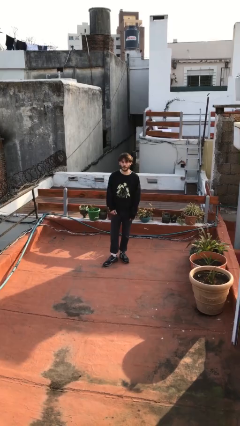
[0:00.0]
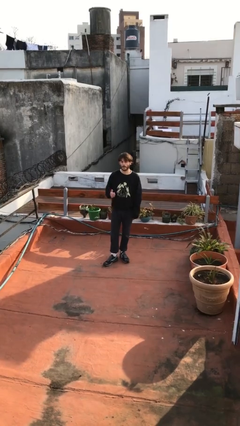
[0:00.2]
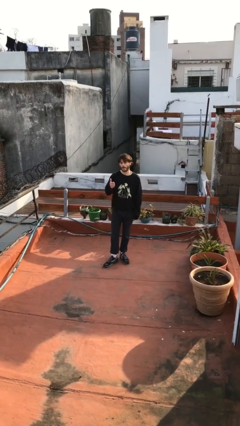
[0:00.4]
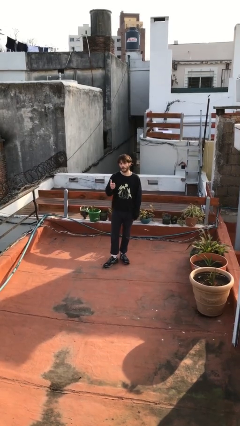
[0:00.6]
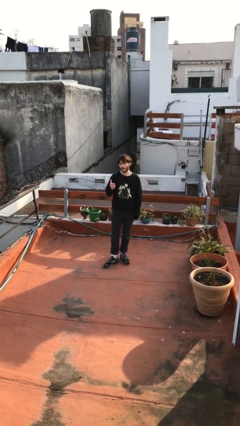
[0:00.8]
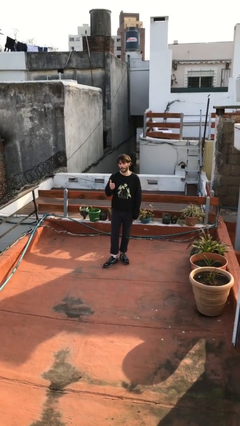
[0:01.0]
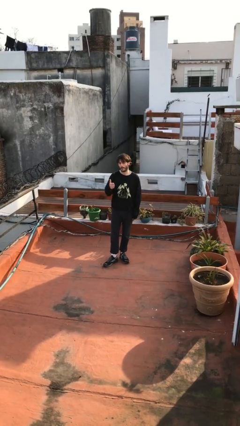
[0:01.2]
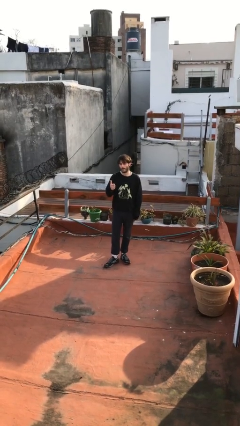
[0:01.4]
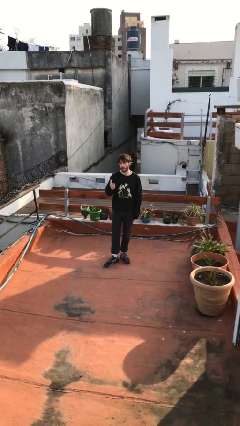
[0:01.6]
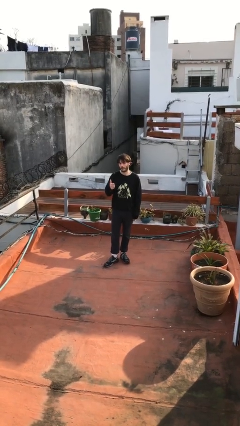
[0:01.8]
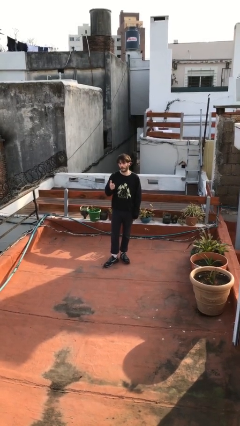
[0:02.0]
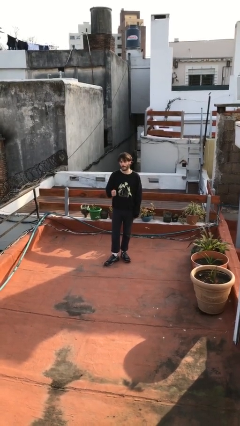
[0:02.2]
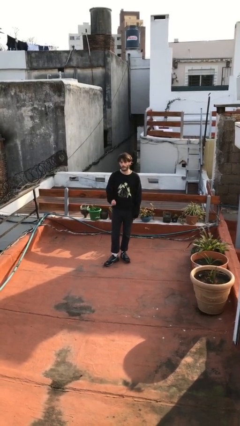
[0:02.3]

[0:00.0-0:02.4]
person gestures thumbs up

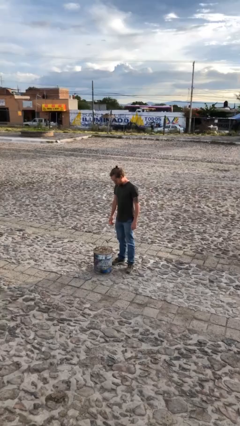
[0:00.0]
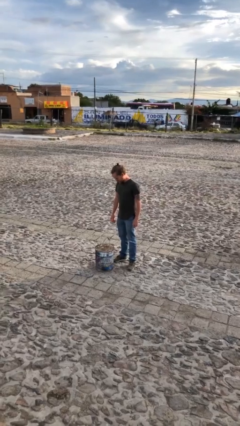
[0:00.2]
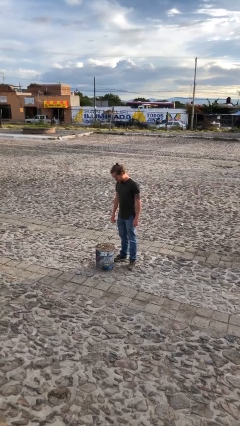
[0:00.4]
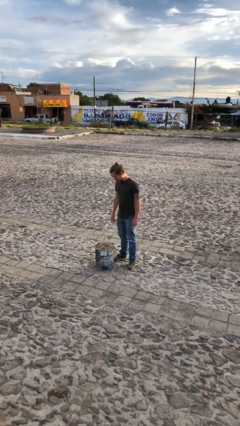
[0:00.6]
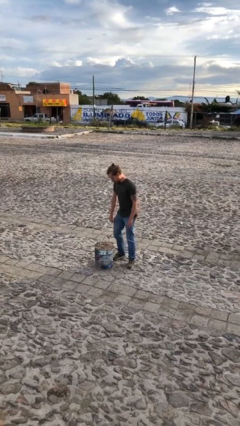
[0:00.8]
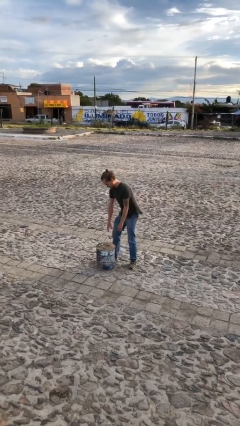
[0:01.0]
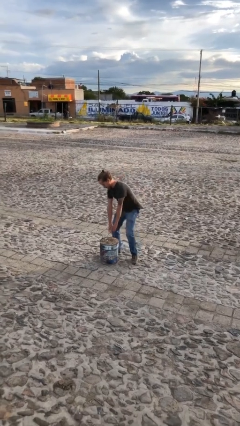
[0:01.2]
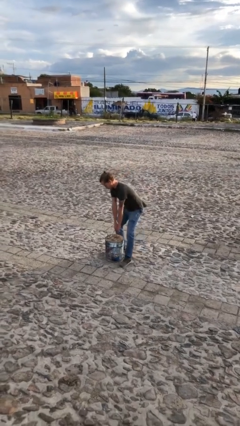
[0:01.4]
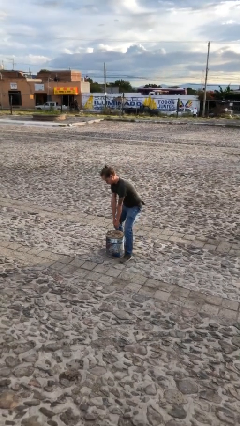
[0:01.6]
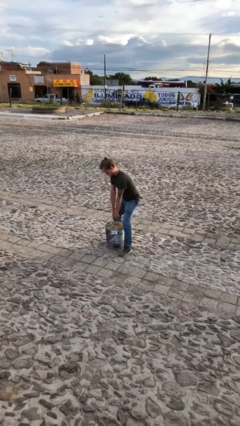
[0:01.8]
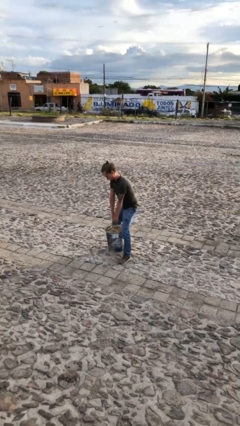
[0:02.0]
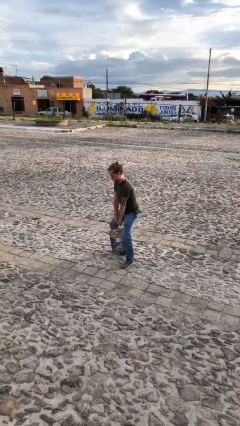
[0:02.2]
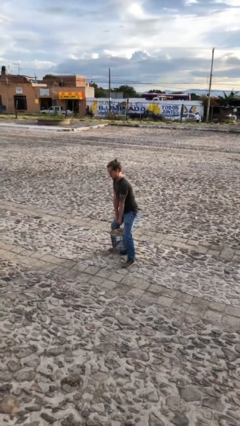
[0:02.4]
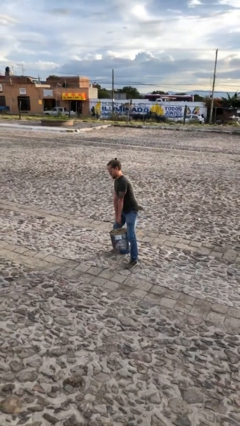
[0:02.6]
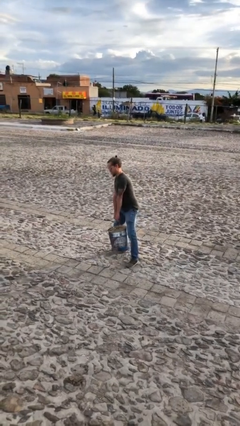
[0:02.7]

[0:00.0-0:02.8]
person picks up object from floor

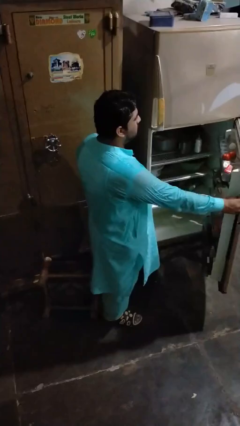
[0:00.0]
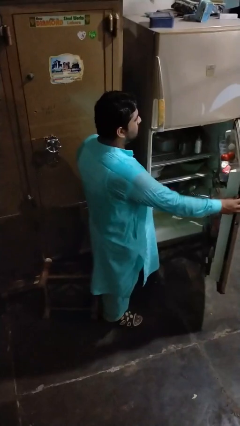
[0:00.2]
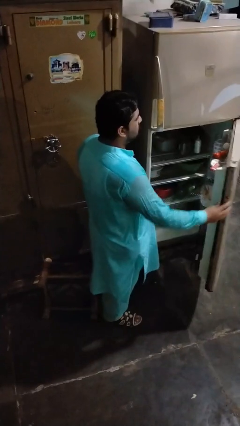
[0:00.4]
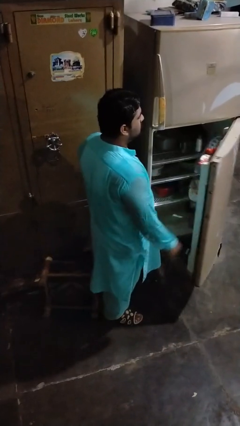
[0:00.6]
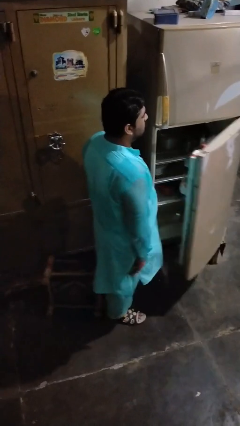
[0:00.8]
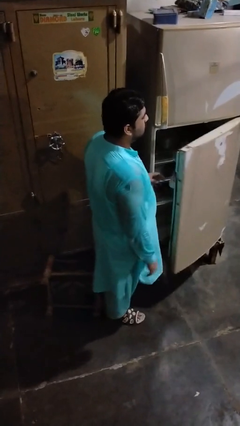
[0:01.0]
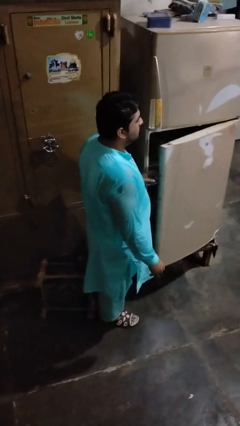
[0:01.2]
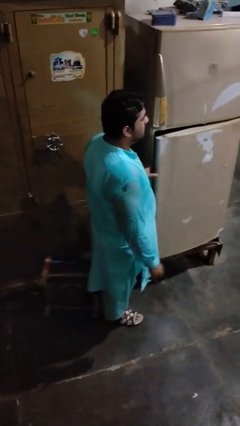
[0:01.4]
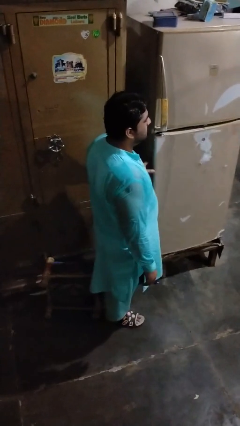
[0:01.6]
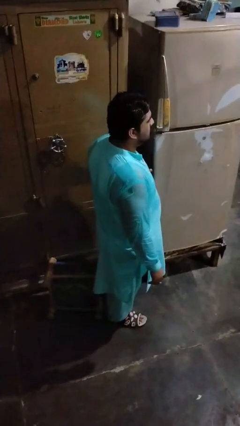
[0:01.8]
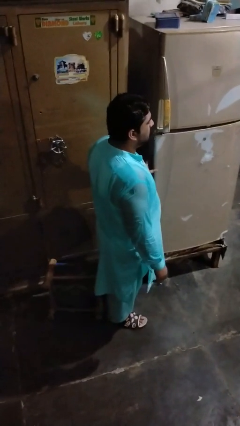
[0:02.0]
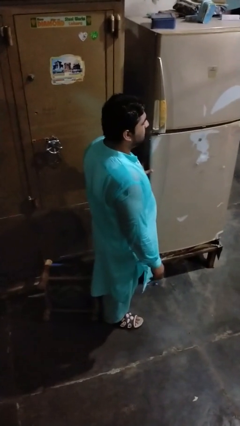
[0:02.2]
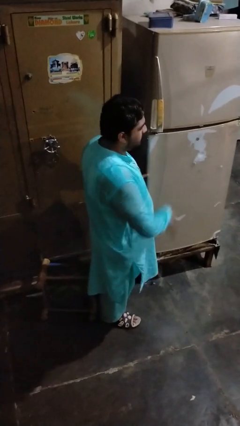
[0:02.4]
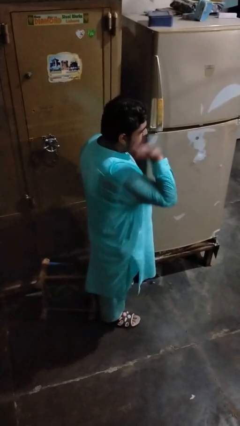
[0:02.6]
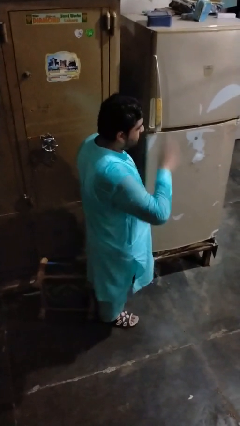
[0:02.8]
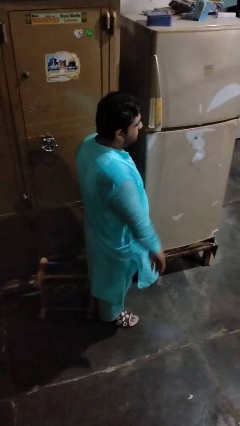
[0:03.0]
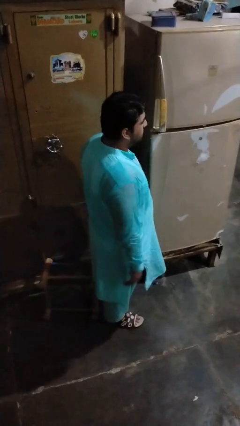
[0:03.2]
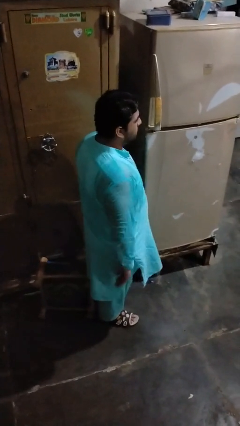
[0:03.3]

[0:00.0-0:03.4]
person closes refrigerator

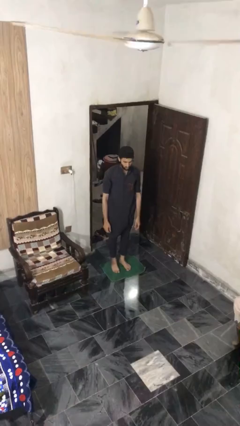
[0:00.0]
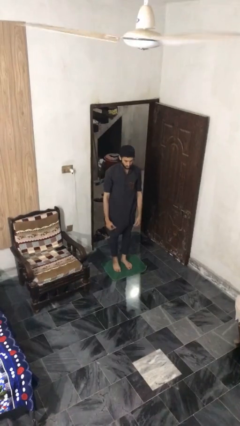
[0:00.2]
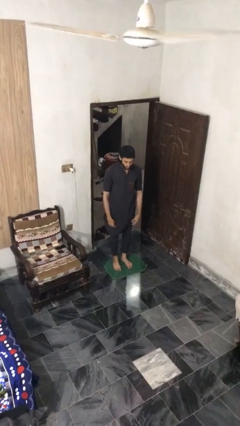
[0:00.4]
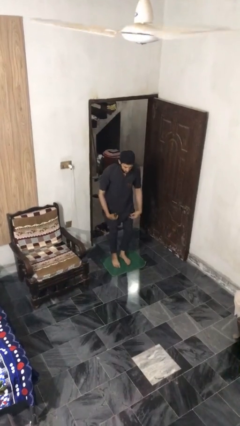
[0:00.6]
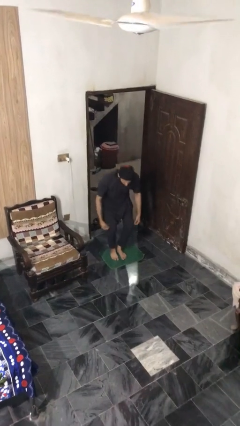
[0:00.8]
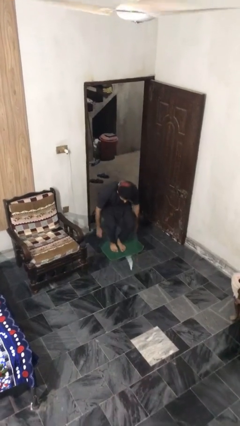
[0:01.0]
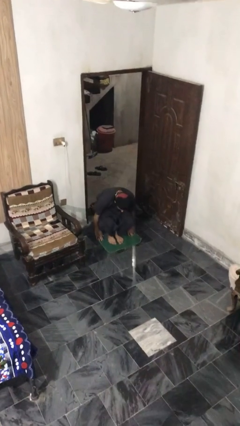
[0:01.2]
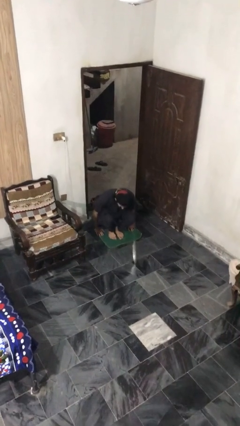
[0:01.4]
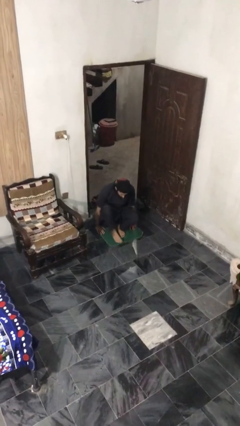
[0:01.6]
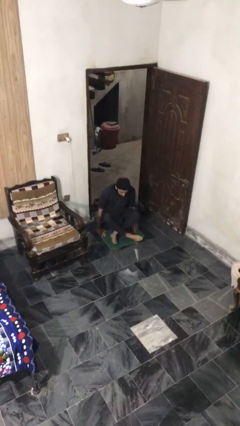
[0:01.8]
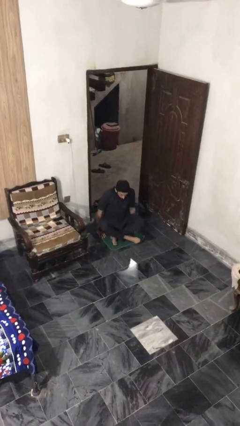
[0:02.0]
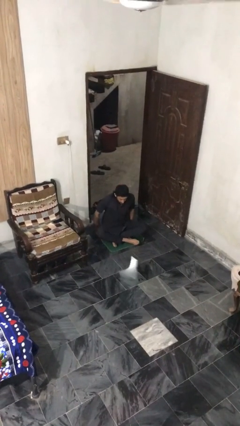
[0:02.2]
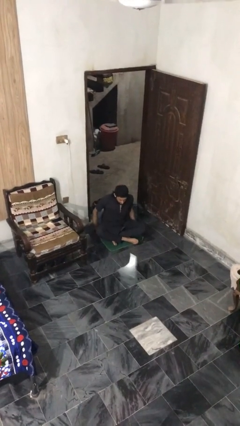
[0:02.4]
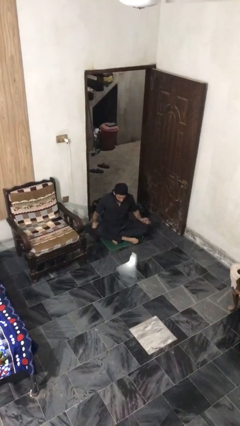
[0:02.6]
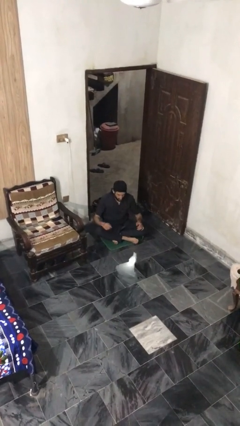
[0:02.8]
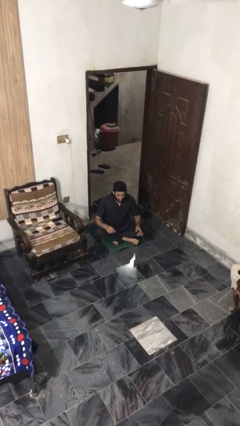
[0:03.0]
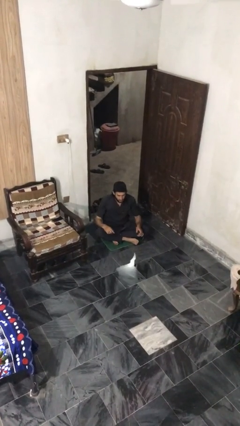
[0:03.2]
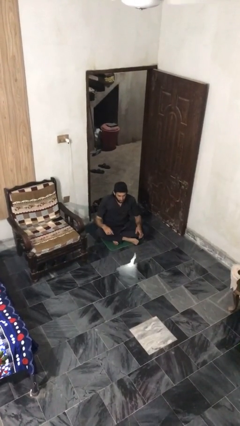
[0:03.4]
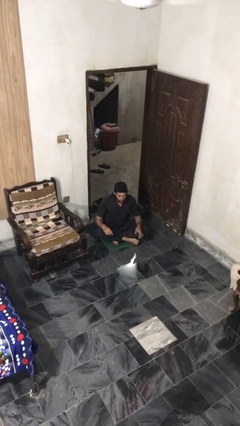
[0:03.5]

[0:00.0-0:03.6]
person sits crisscross

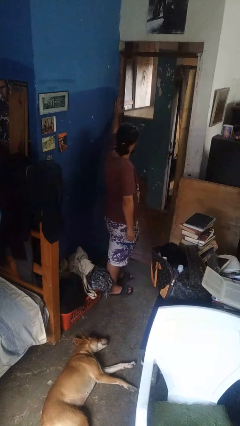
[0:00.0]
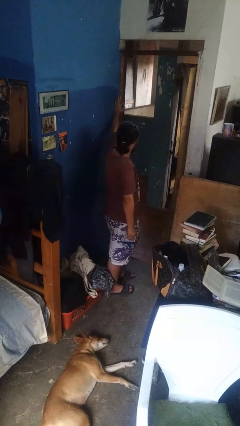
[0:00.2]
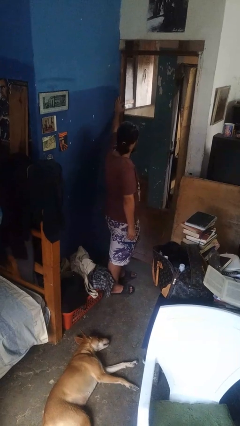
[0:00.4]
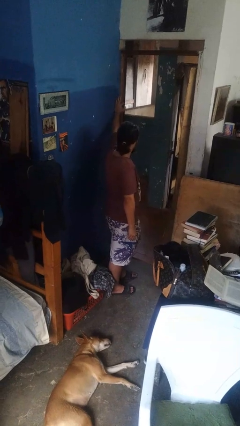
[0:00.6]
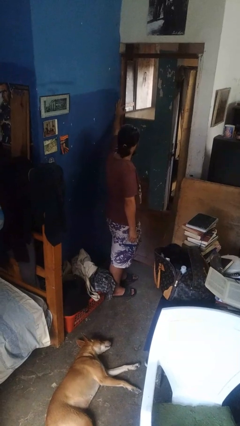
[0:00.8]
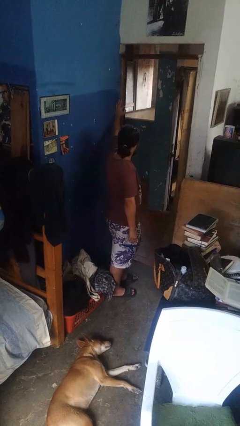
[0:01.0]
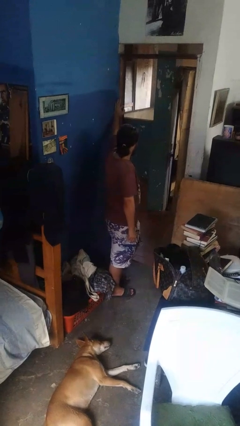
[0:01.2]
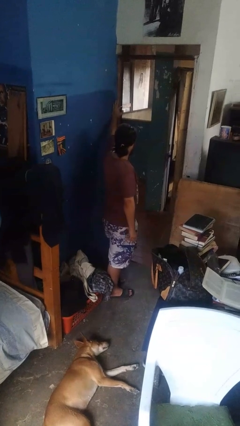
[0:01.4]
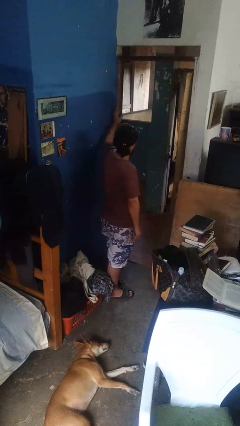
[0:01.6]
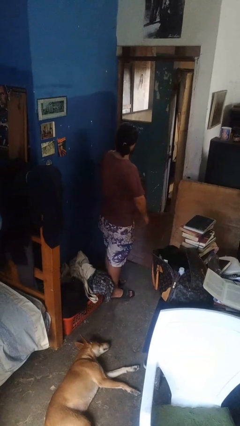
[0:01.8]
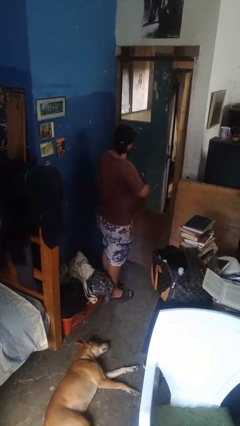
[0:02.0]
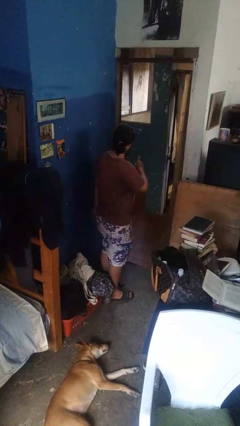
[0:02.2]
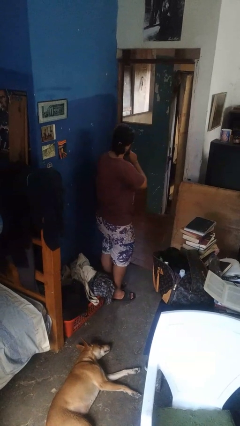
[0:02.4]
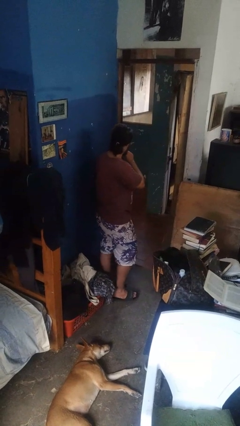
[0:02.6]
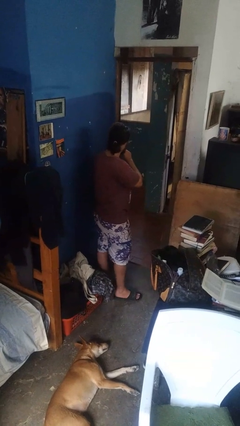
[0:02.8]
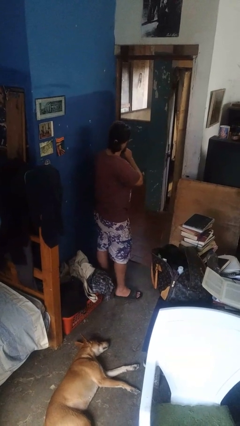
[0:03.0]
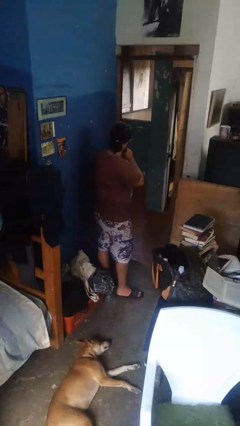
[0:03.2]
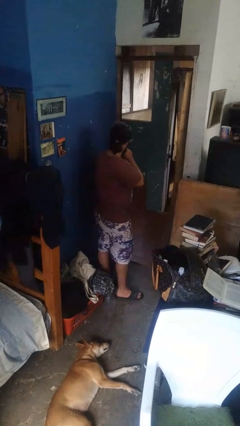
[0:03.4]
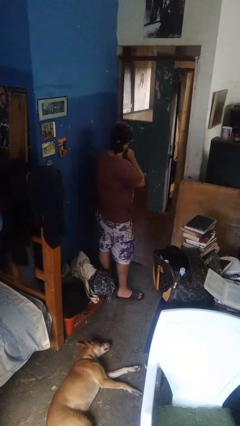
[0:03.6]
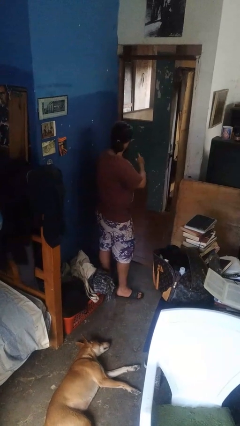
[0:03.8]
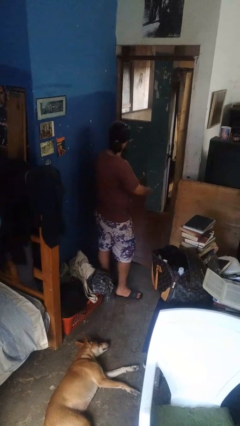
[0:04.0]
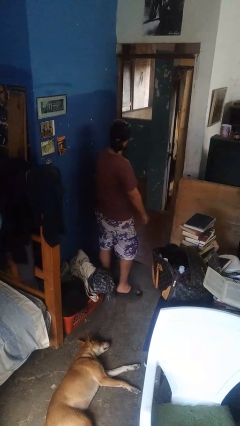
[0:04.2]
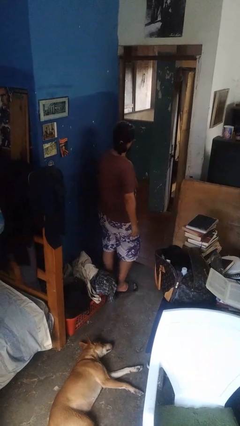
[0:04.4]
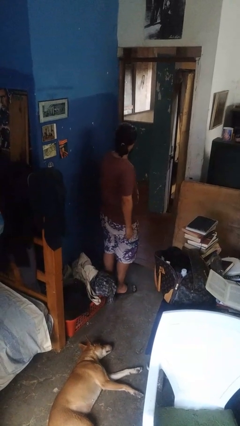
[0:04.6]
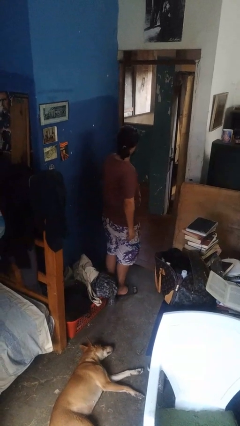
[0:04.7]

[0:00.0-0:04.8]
person gestures be quiet

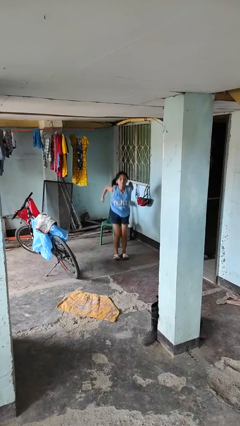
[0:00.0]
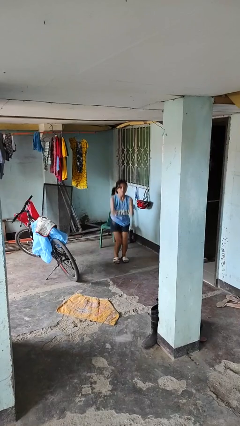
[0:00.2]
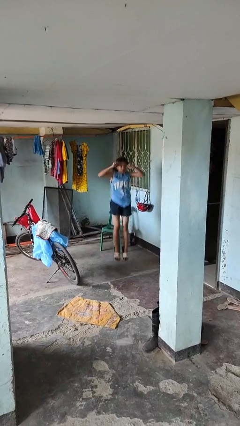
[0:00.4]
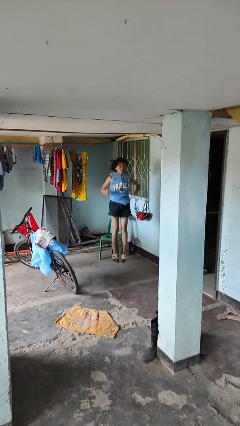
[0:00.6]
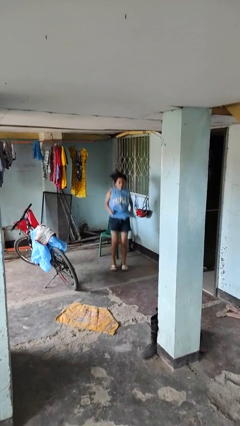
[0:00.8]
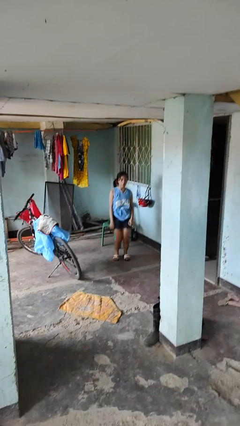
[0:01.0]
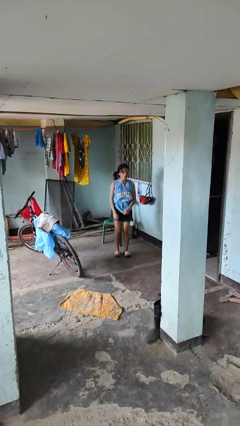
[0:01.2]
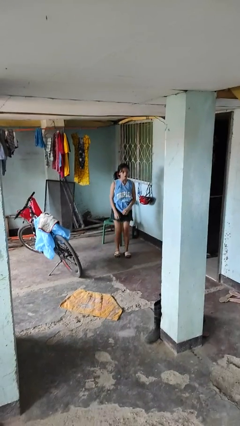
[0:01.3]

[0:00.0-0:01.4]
person jumps
